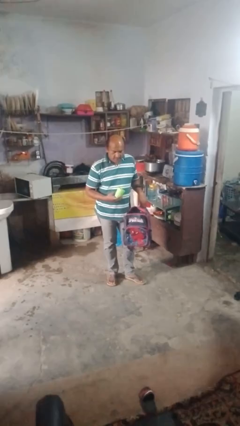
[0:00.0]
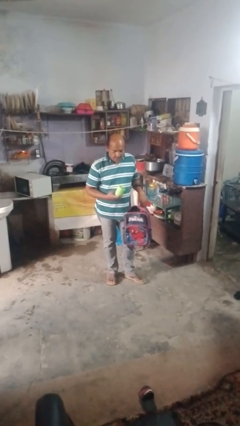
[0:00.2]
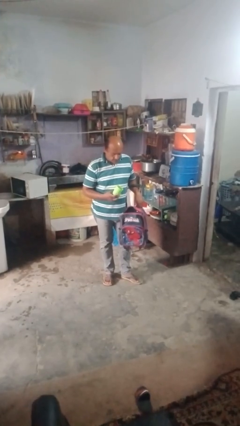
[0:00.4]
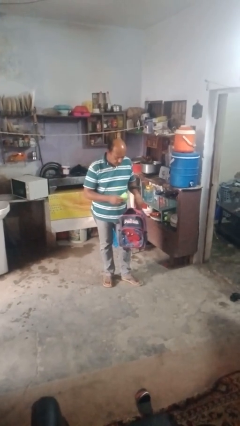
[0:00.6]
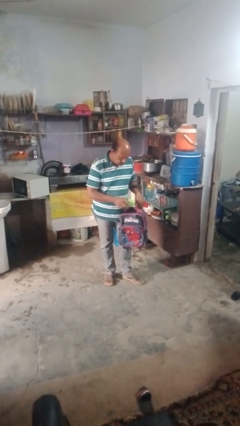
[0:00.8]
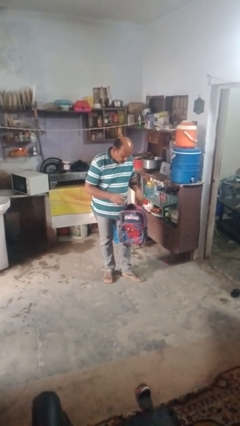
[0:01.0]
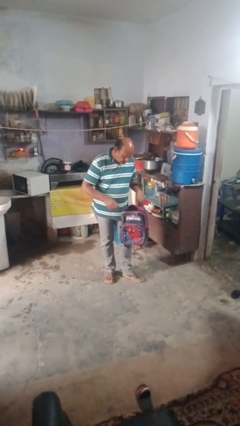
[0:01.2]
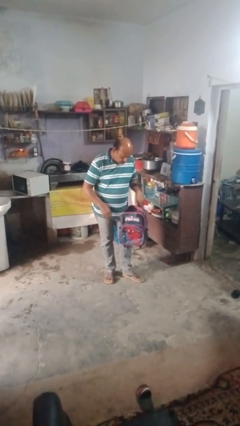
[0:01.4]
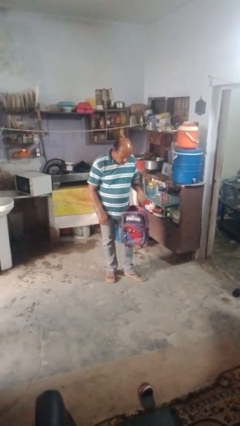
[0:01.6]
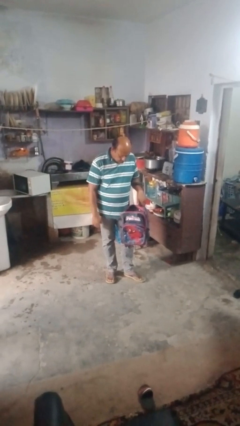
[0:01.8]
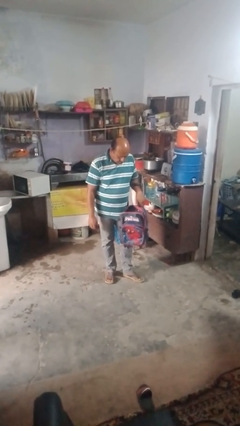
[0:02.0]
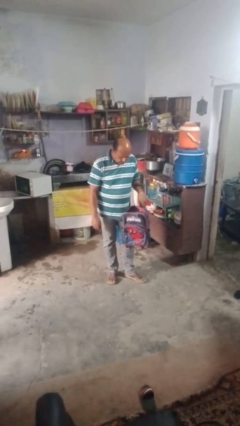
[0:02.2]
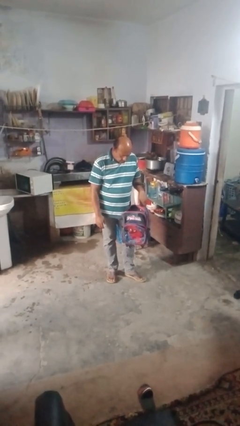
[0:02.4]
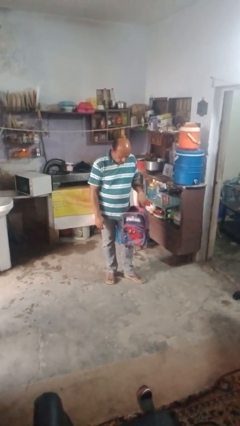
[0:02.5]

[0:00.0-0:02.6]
person puts object into bag

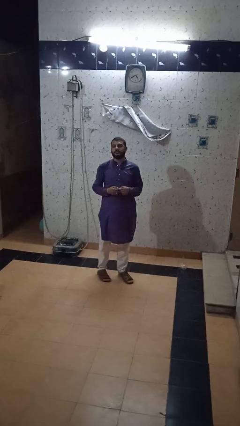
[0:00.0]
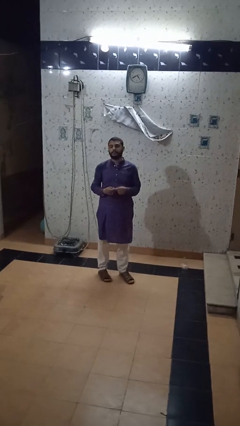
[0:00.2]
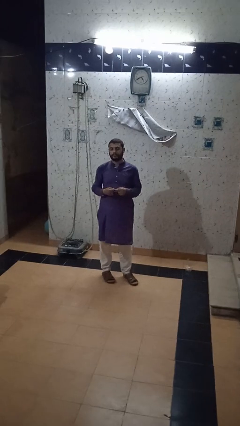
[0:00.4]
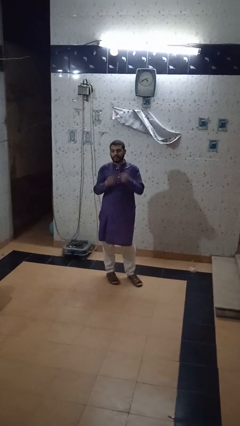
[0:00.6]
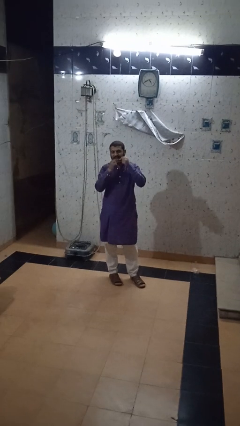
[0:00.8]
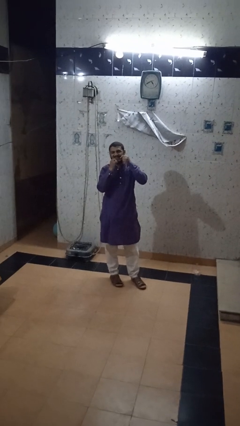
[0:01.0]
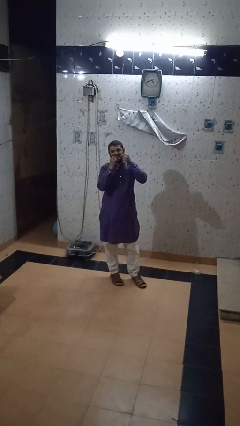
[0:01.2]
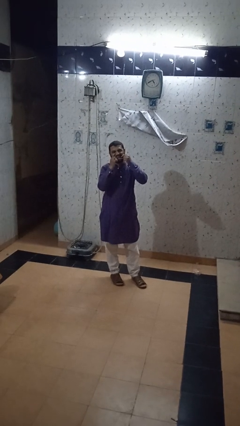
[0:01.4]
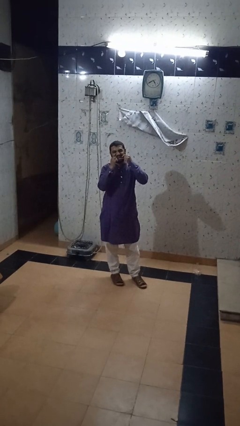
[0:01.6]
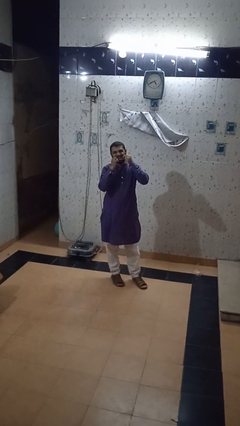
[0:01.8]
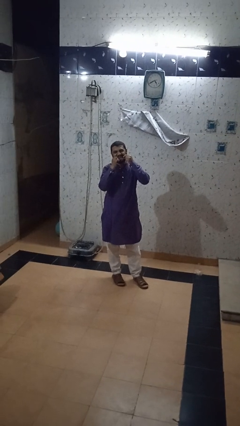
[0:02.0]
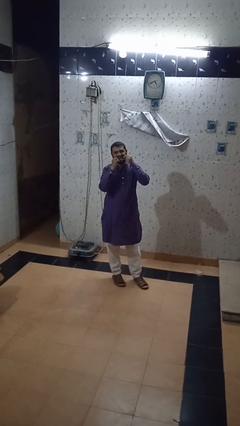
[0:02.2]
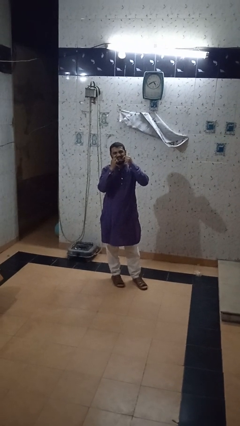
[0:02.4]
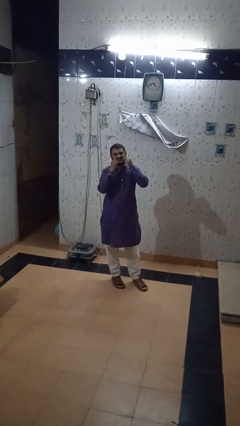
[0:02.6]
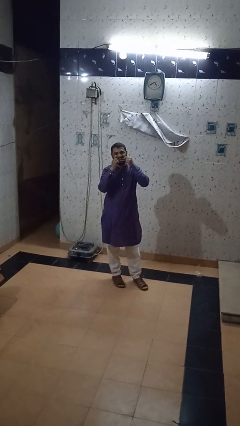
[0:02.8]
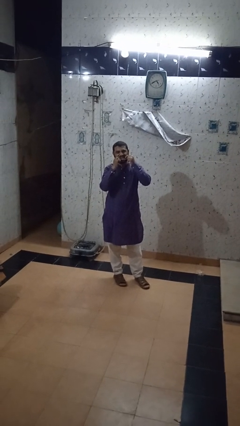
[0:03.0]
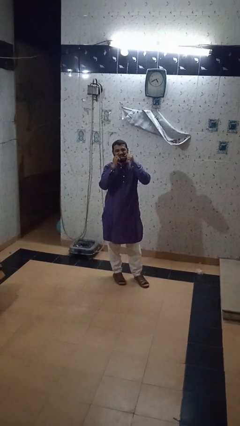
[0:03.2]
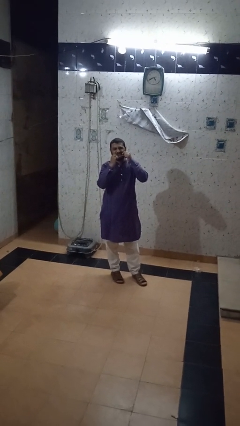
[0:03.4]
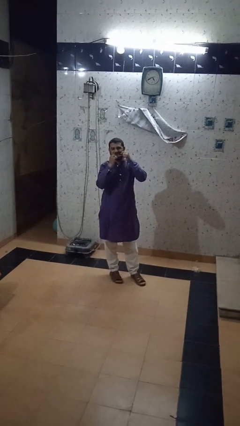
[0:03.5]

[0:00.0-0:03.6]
person flosses

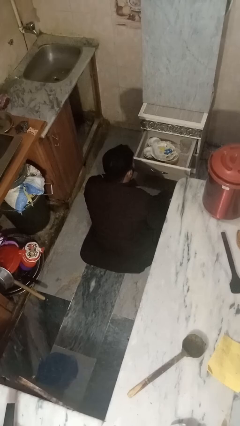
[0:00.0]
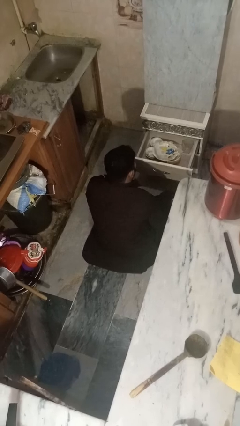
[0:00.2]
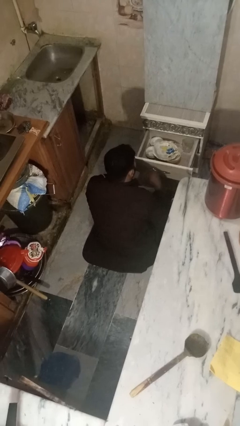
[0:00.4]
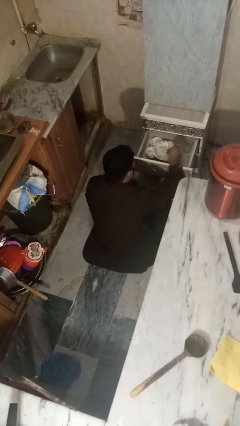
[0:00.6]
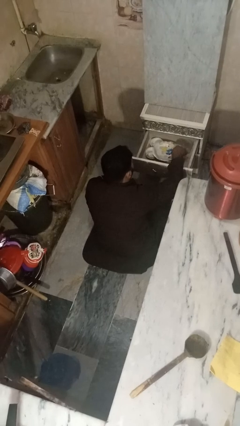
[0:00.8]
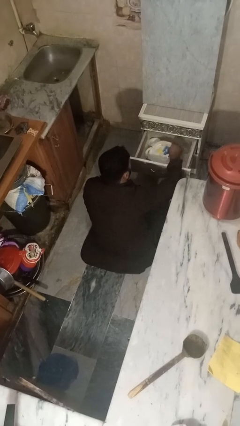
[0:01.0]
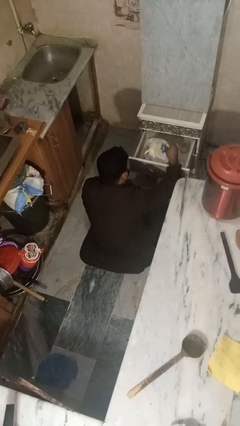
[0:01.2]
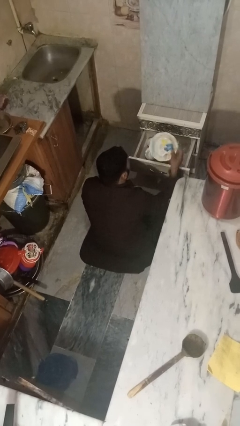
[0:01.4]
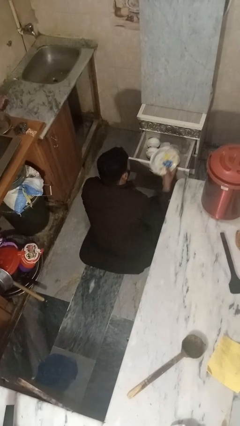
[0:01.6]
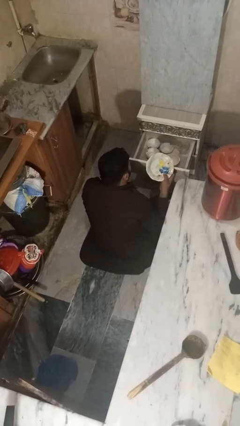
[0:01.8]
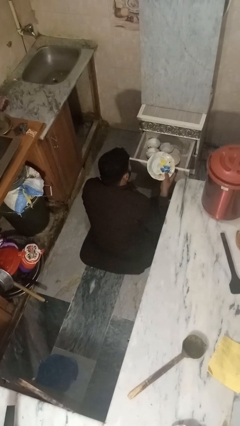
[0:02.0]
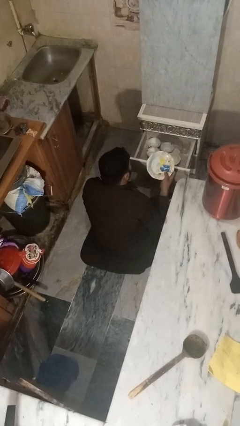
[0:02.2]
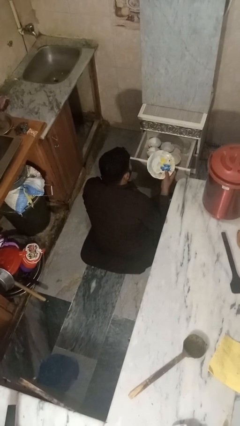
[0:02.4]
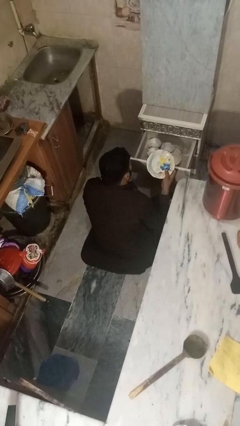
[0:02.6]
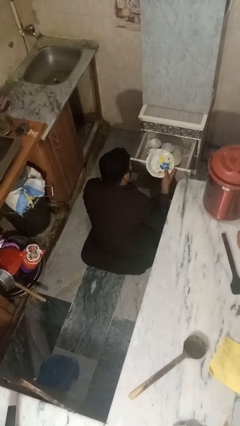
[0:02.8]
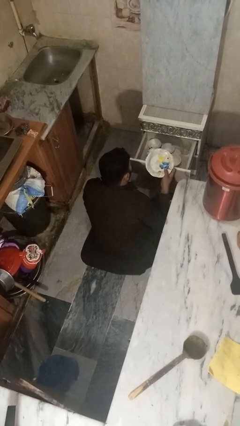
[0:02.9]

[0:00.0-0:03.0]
person takes object from kitchen drawer

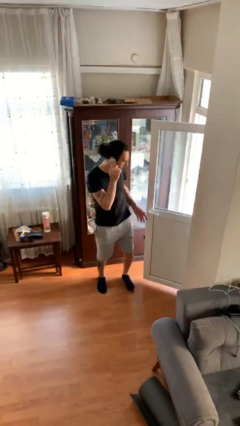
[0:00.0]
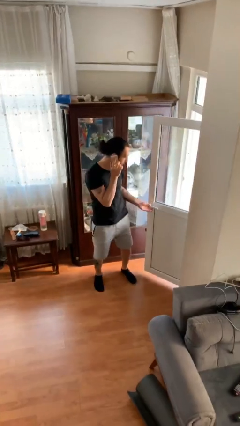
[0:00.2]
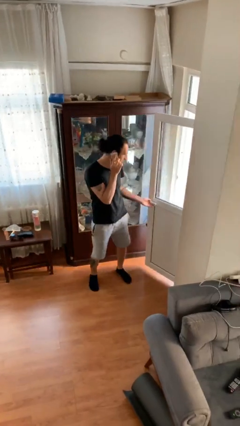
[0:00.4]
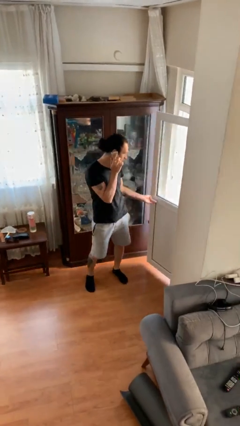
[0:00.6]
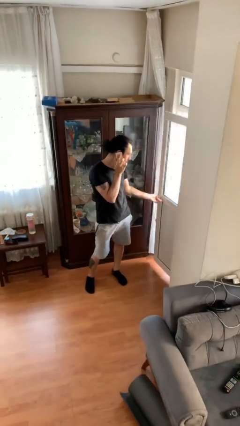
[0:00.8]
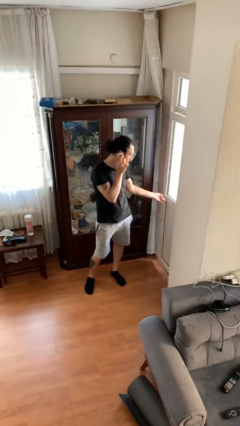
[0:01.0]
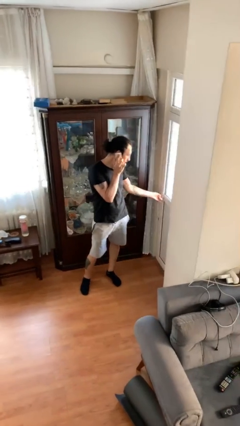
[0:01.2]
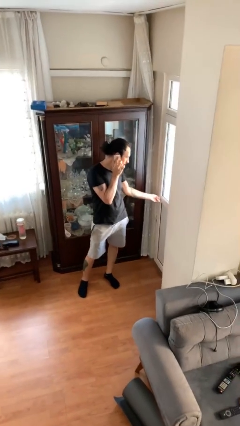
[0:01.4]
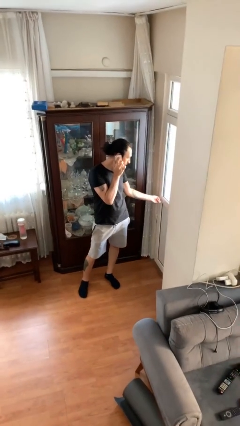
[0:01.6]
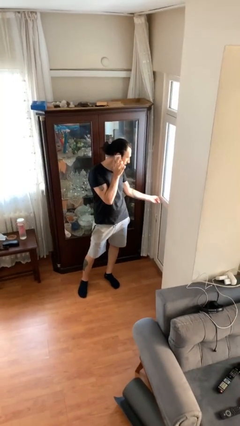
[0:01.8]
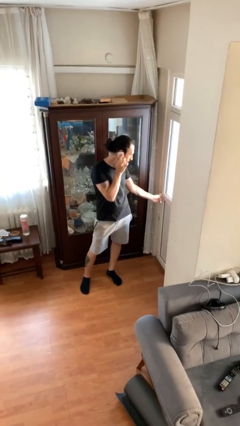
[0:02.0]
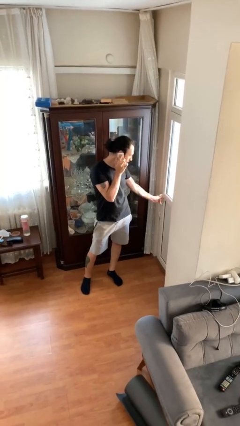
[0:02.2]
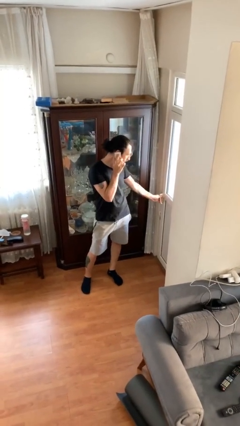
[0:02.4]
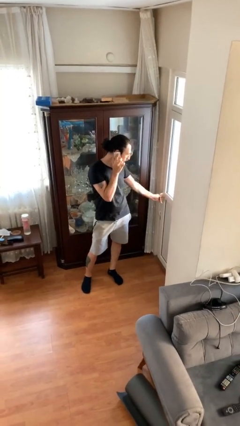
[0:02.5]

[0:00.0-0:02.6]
person closes facility door

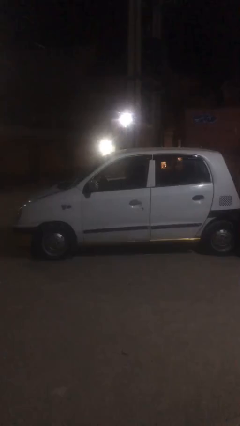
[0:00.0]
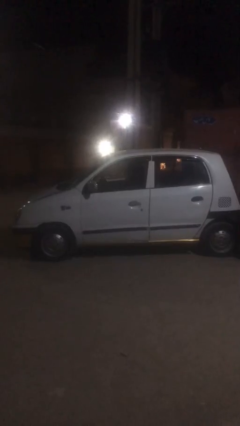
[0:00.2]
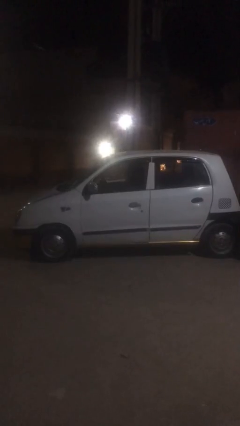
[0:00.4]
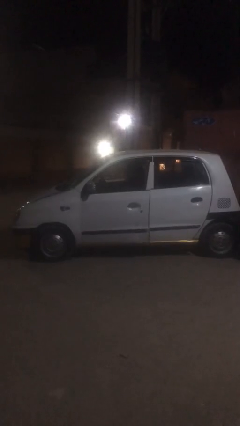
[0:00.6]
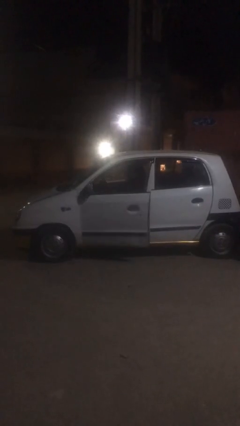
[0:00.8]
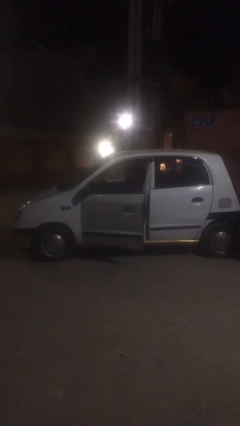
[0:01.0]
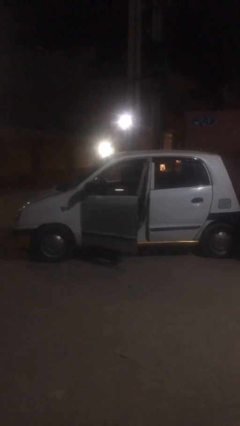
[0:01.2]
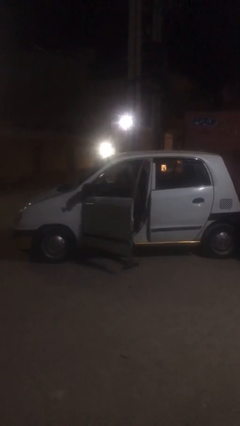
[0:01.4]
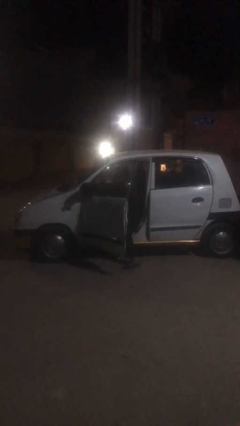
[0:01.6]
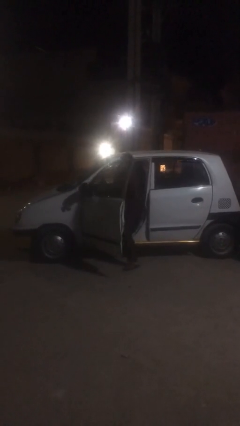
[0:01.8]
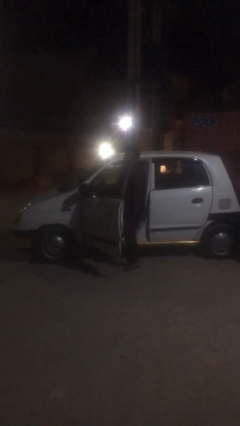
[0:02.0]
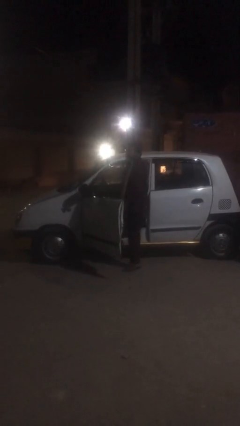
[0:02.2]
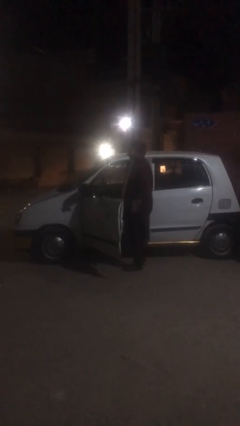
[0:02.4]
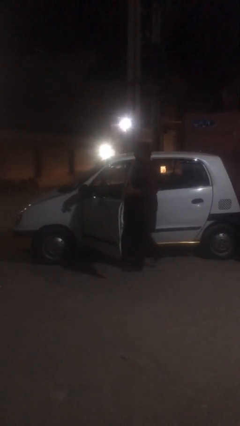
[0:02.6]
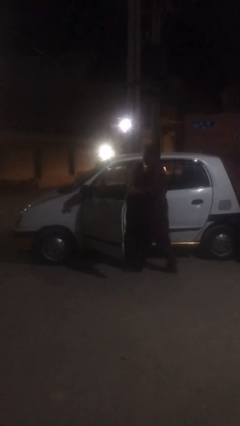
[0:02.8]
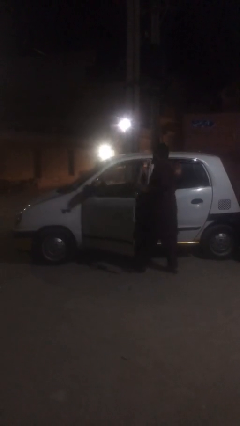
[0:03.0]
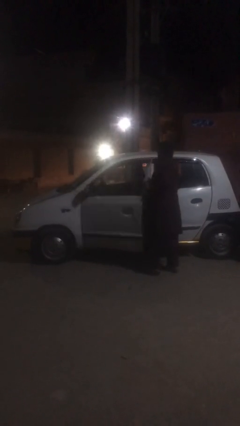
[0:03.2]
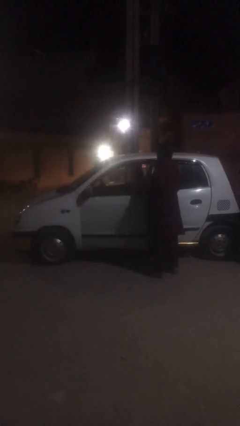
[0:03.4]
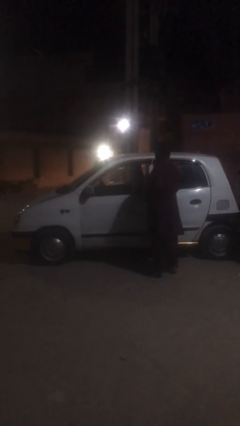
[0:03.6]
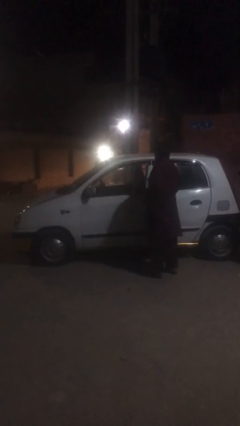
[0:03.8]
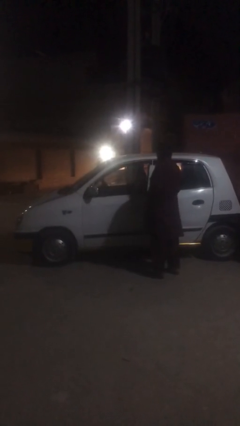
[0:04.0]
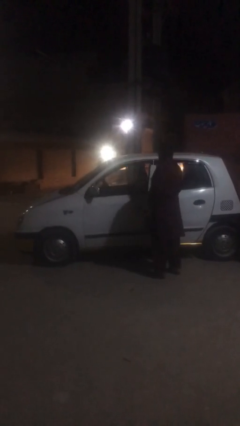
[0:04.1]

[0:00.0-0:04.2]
car drops off person

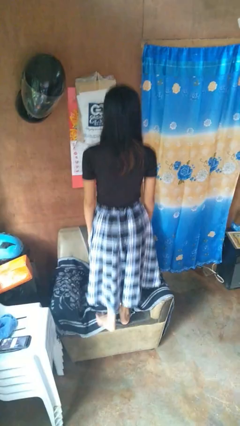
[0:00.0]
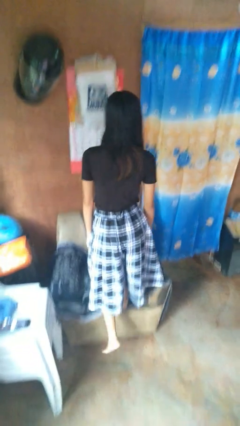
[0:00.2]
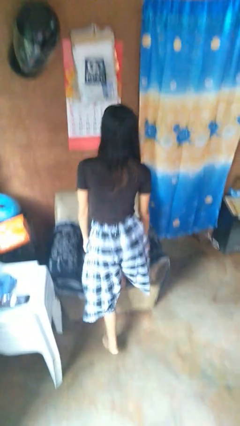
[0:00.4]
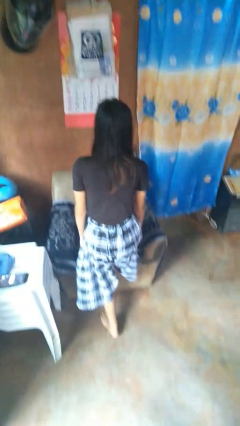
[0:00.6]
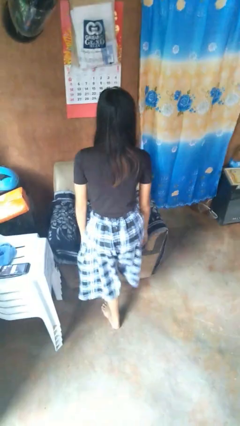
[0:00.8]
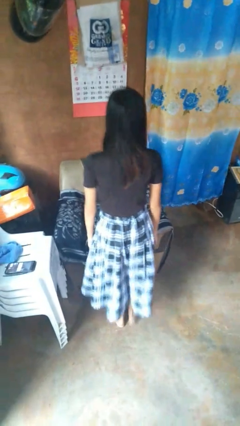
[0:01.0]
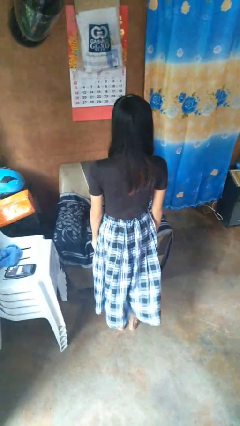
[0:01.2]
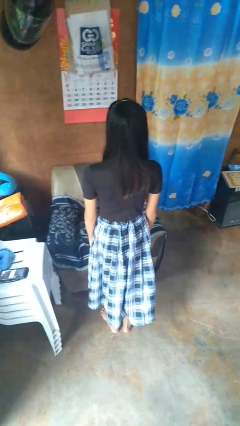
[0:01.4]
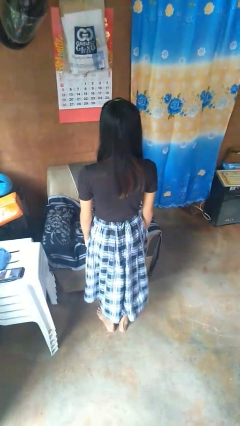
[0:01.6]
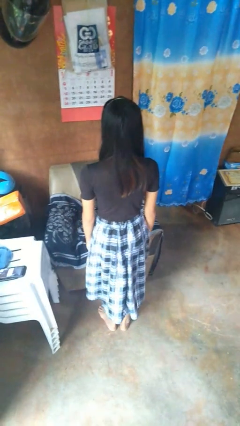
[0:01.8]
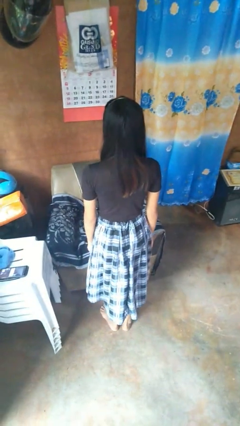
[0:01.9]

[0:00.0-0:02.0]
person climbs off couch
